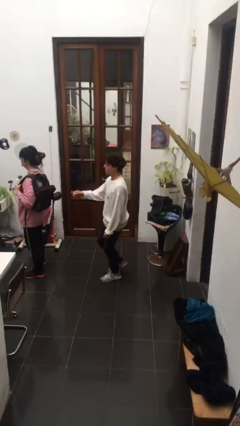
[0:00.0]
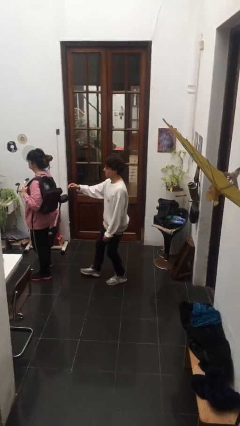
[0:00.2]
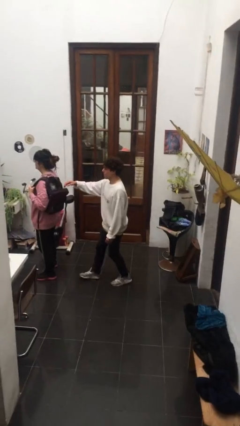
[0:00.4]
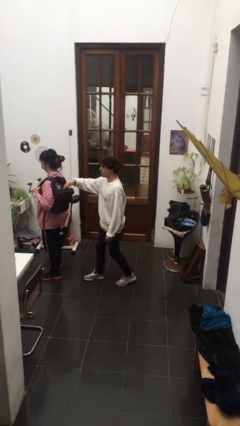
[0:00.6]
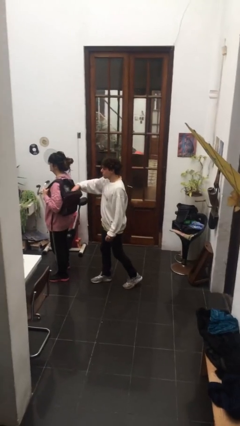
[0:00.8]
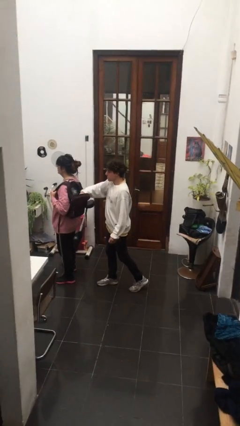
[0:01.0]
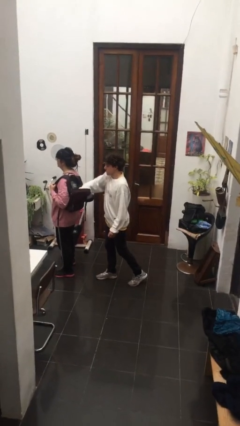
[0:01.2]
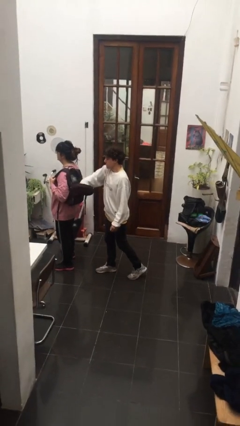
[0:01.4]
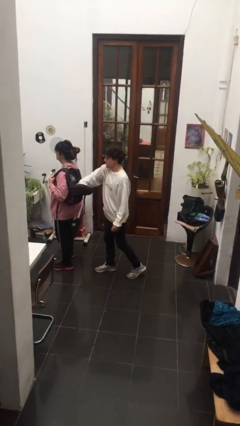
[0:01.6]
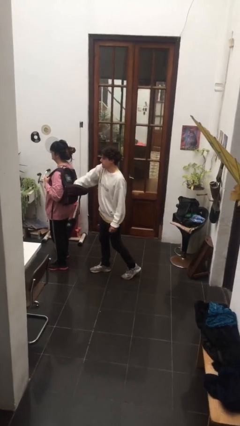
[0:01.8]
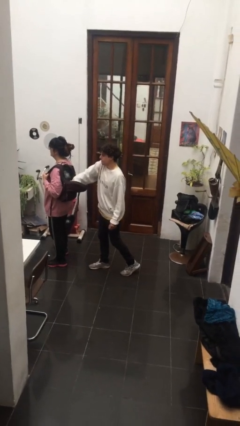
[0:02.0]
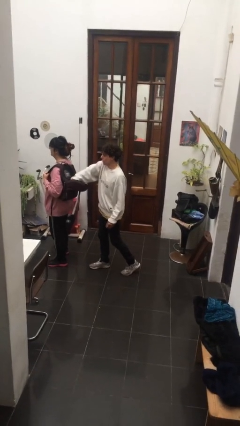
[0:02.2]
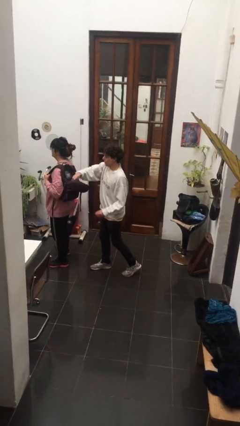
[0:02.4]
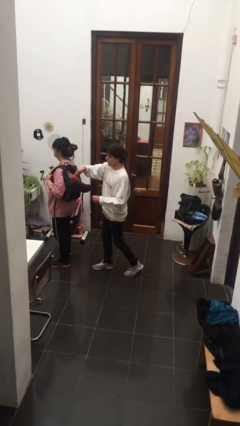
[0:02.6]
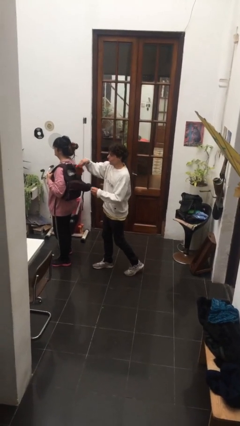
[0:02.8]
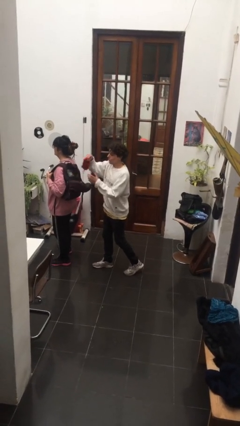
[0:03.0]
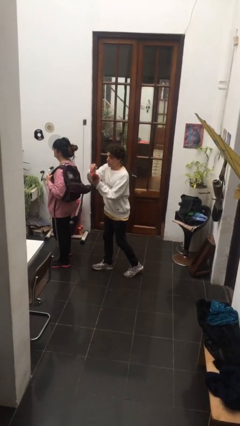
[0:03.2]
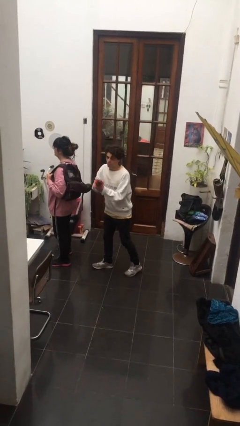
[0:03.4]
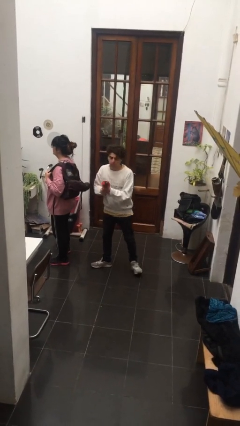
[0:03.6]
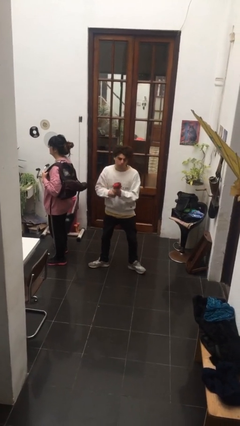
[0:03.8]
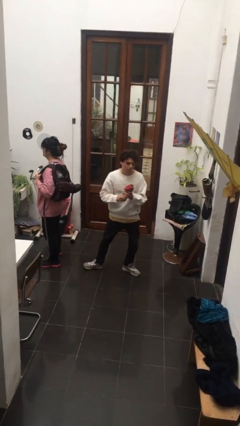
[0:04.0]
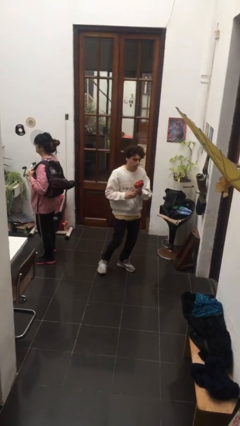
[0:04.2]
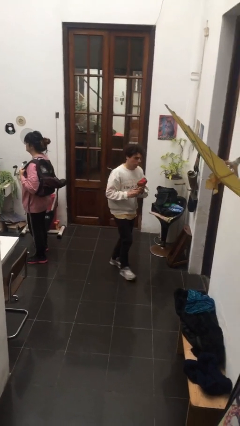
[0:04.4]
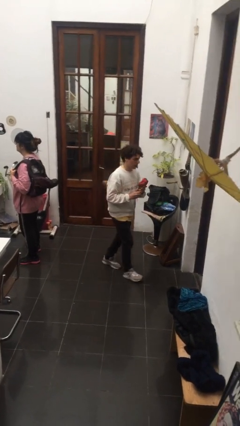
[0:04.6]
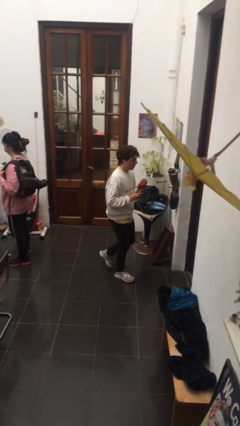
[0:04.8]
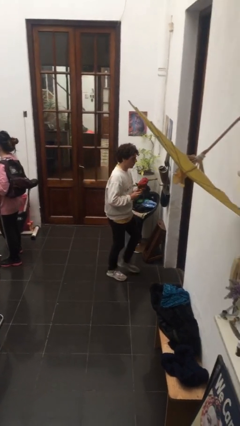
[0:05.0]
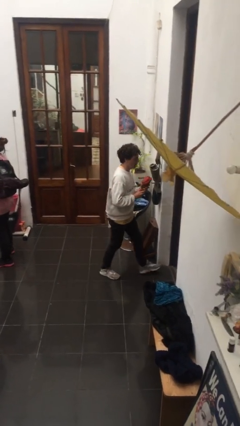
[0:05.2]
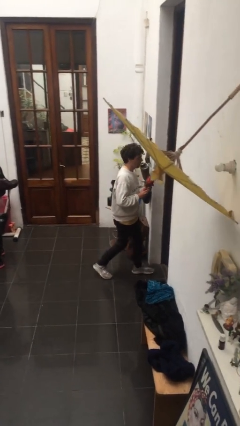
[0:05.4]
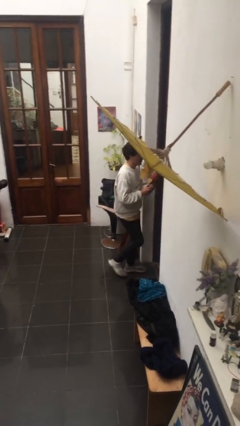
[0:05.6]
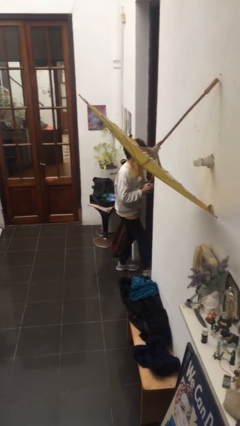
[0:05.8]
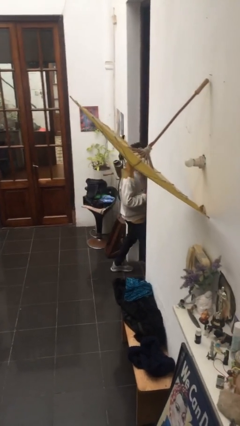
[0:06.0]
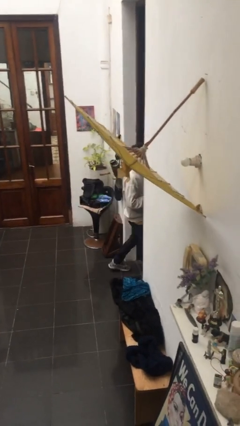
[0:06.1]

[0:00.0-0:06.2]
person steals object from person

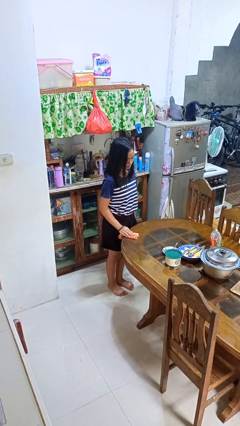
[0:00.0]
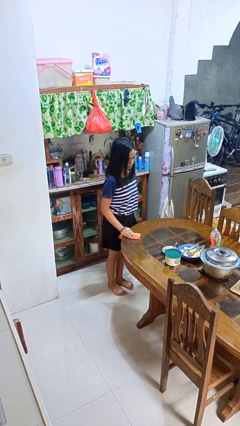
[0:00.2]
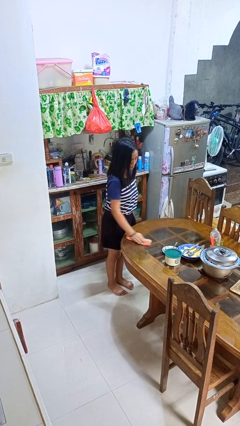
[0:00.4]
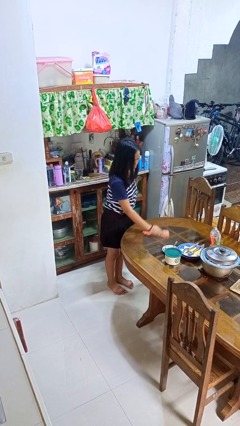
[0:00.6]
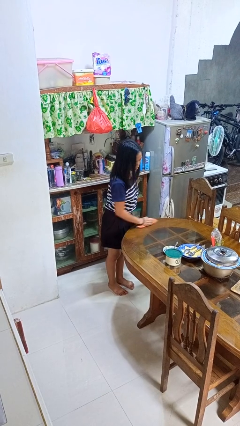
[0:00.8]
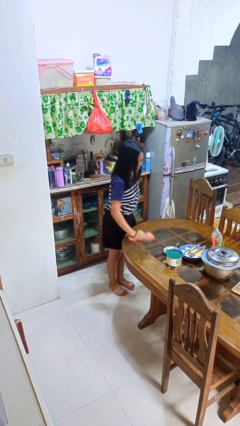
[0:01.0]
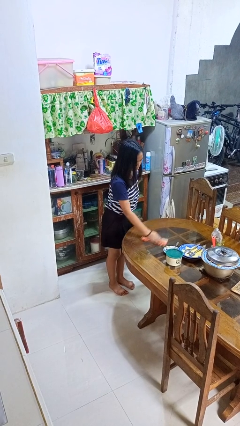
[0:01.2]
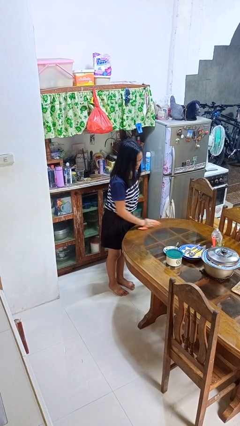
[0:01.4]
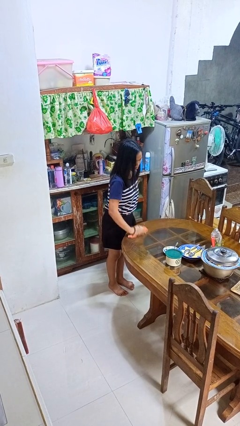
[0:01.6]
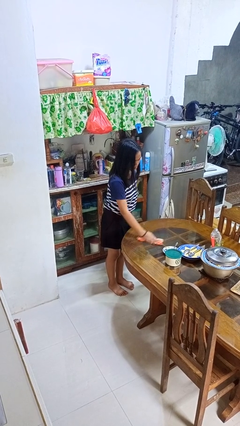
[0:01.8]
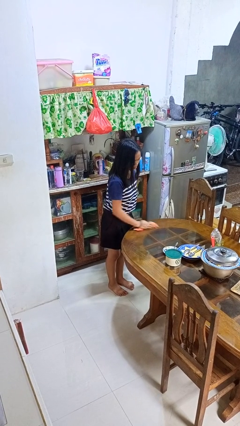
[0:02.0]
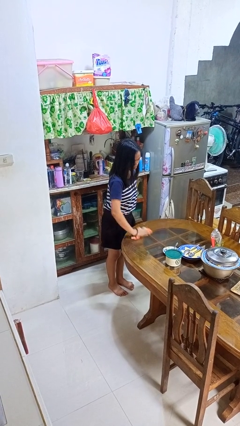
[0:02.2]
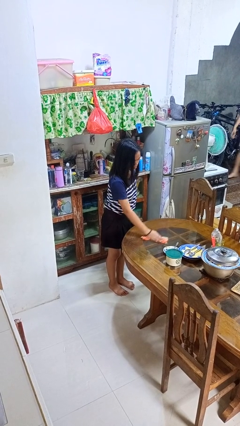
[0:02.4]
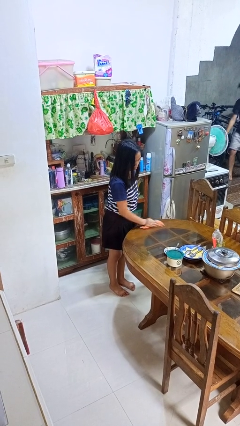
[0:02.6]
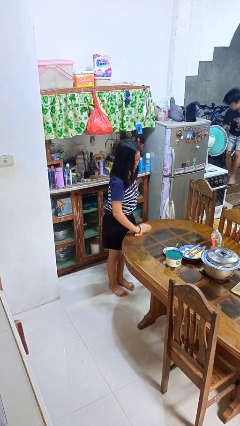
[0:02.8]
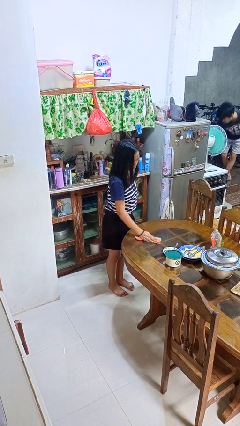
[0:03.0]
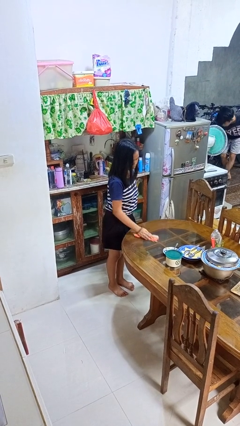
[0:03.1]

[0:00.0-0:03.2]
person cleans table with rag

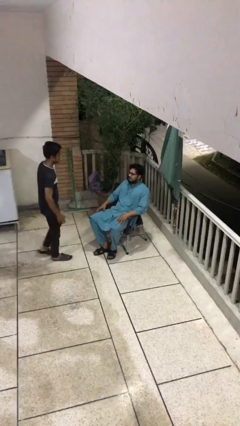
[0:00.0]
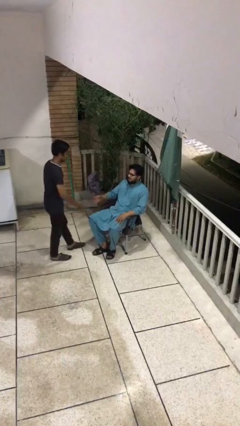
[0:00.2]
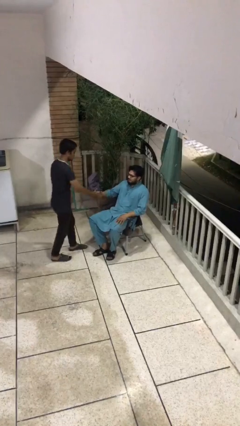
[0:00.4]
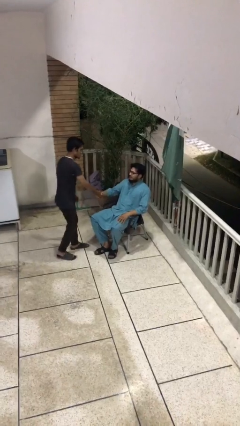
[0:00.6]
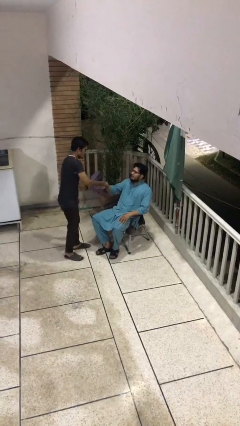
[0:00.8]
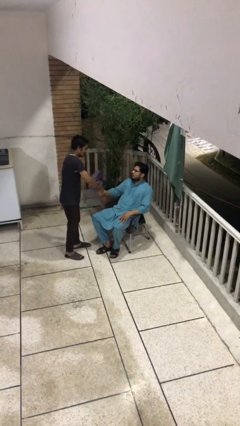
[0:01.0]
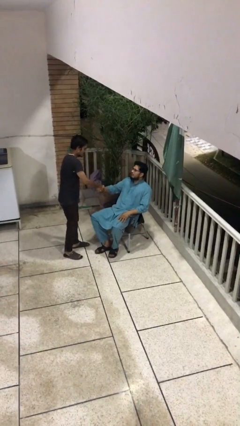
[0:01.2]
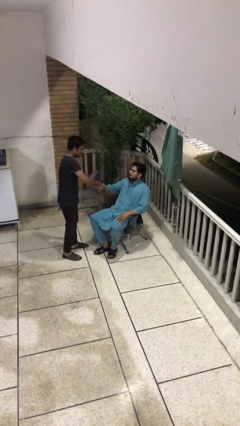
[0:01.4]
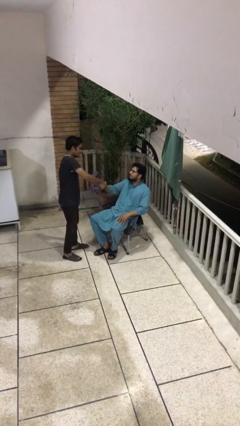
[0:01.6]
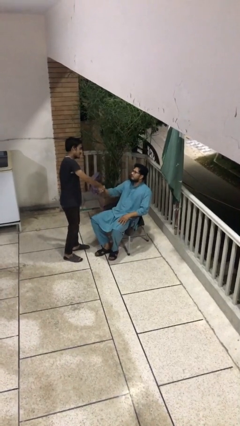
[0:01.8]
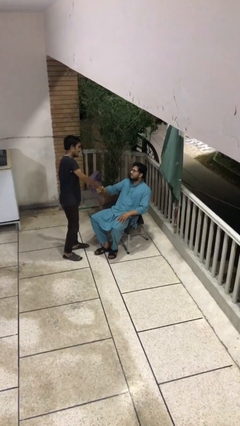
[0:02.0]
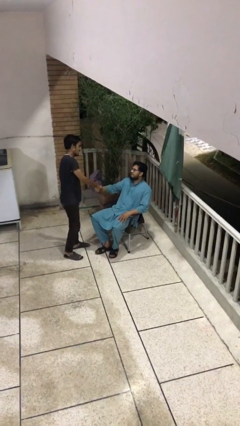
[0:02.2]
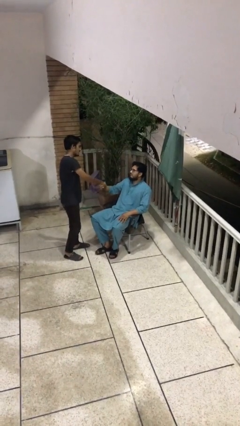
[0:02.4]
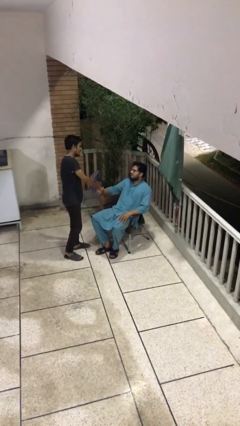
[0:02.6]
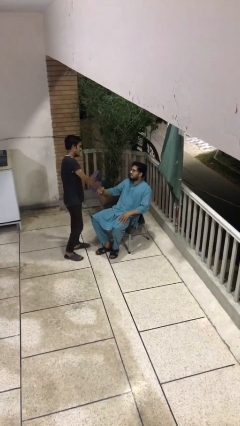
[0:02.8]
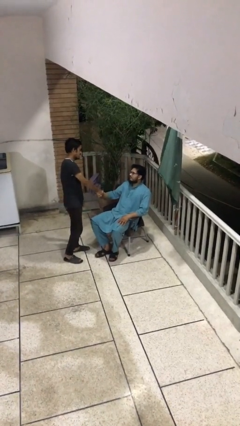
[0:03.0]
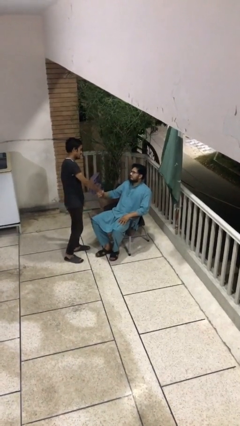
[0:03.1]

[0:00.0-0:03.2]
person shakes hand

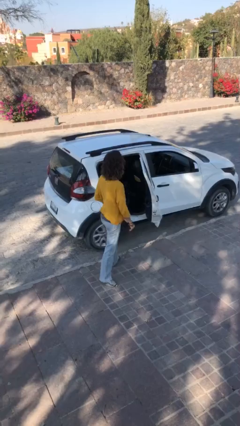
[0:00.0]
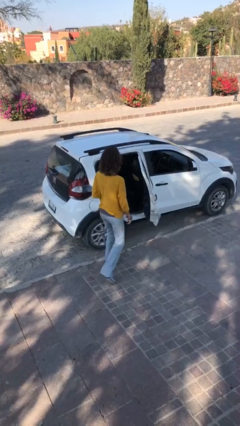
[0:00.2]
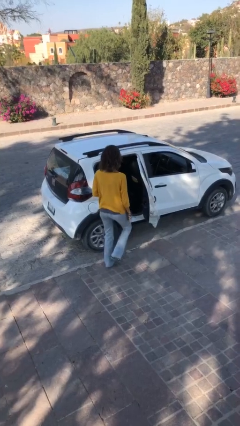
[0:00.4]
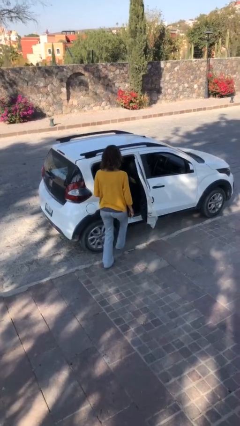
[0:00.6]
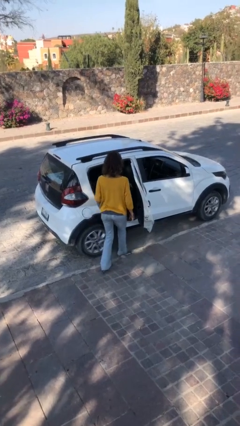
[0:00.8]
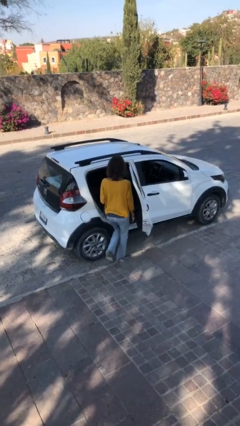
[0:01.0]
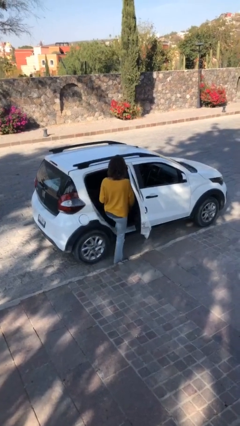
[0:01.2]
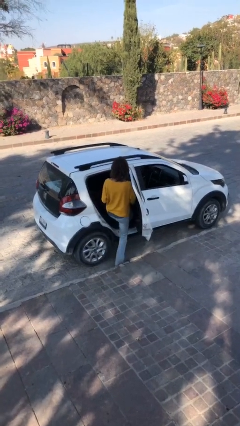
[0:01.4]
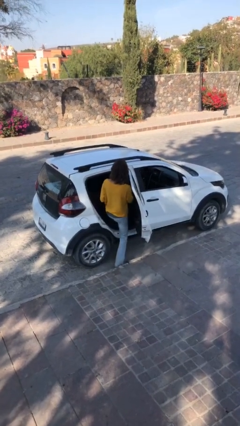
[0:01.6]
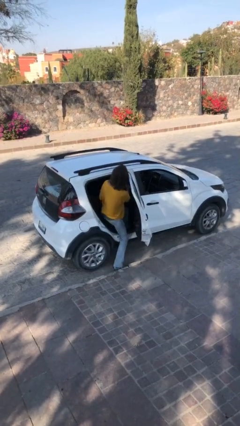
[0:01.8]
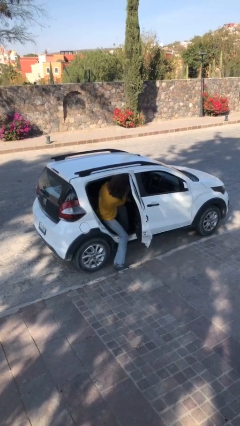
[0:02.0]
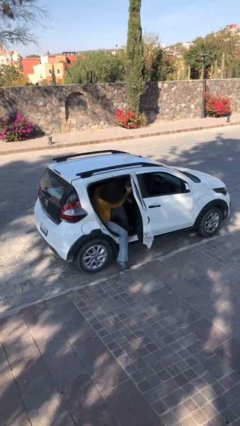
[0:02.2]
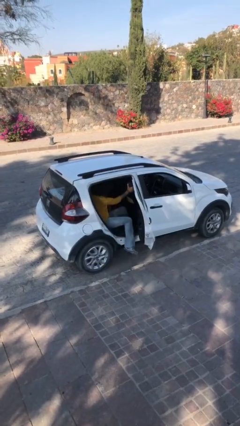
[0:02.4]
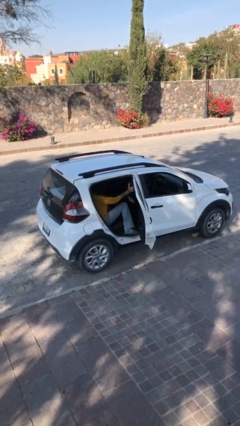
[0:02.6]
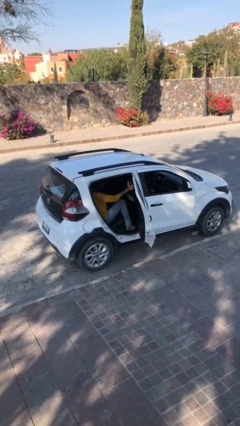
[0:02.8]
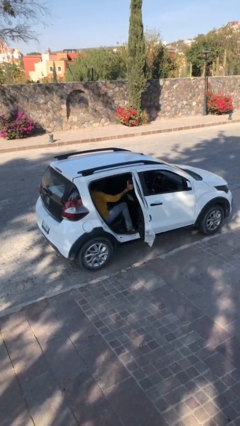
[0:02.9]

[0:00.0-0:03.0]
person enters car

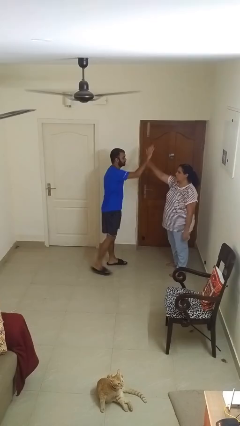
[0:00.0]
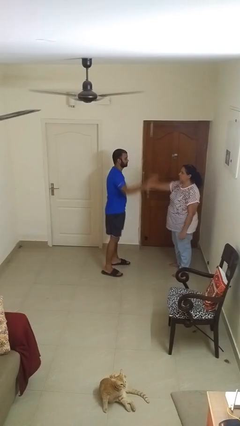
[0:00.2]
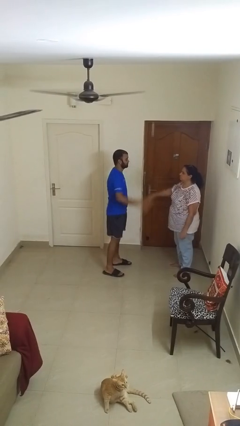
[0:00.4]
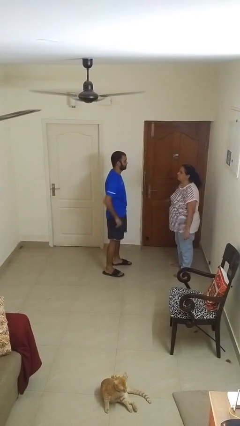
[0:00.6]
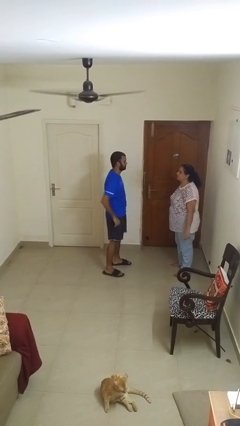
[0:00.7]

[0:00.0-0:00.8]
person highfives hand

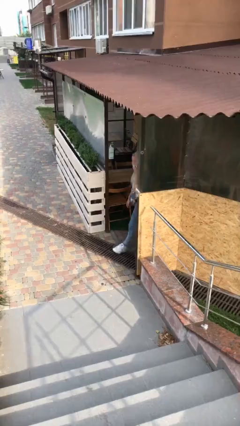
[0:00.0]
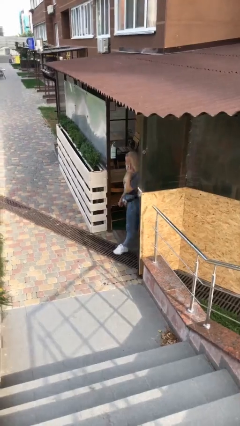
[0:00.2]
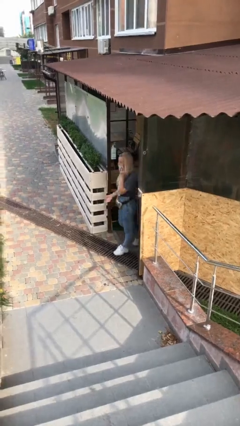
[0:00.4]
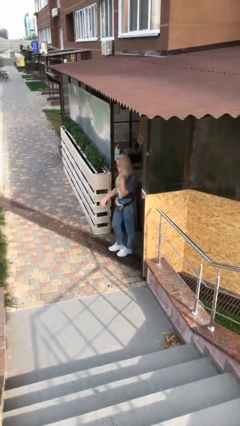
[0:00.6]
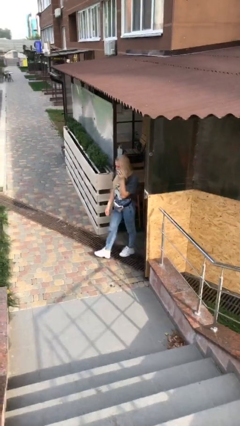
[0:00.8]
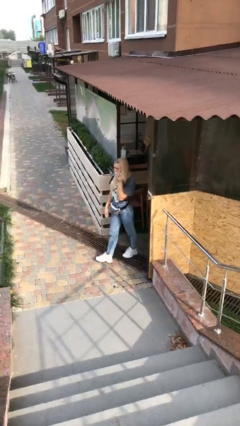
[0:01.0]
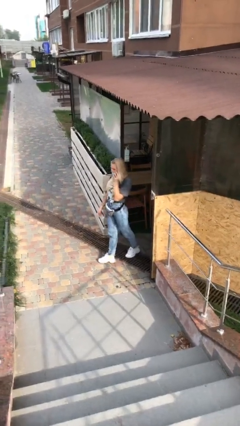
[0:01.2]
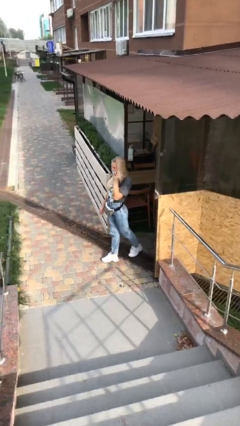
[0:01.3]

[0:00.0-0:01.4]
person exits scene through structure
